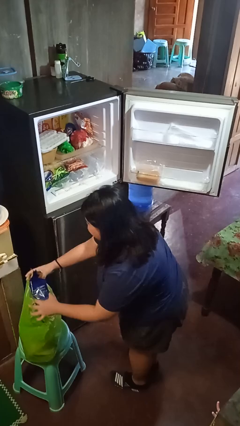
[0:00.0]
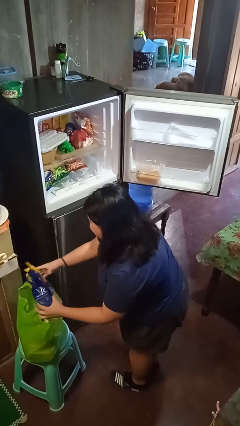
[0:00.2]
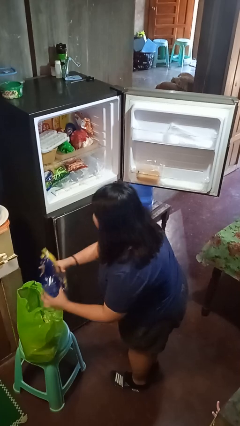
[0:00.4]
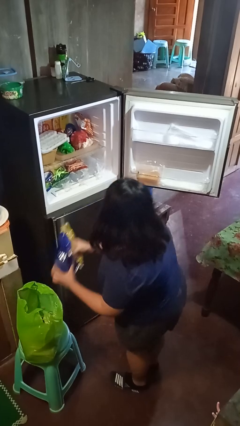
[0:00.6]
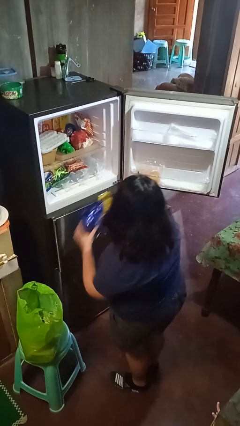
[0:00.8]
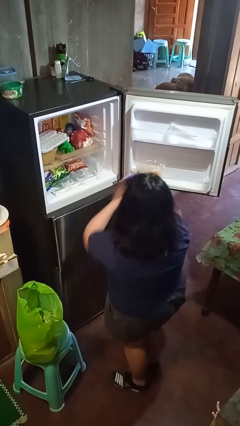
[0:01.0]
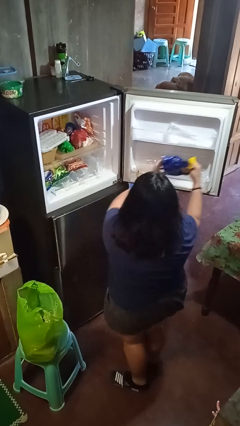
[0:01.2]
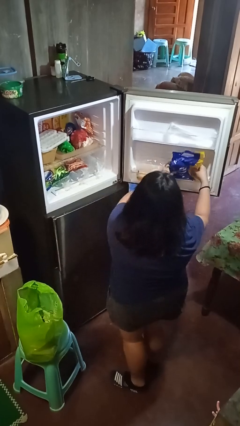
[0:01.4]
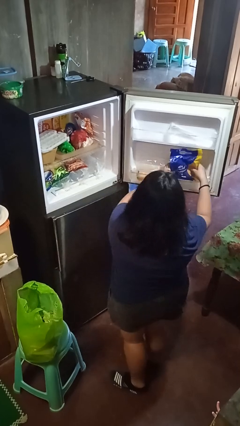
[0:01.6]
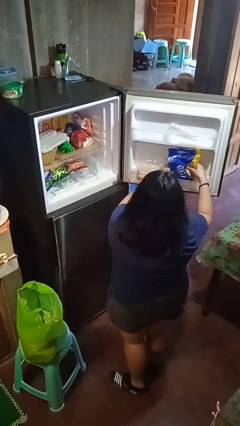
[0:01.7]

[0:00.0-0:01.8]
person loads groceries into refrigerator

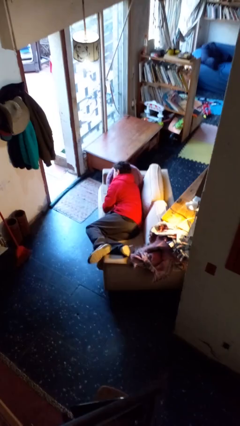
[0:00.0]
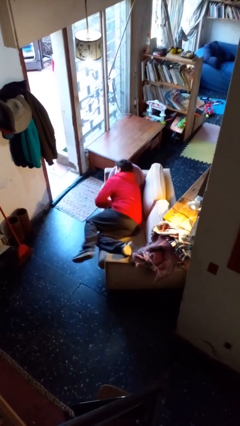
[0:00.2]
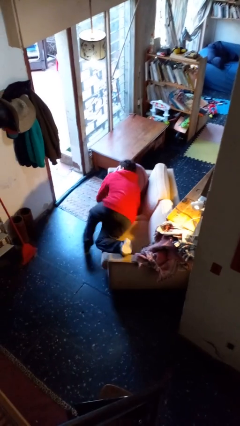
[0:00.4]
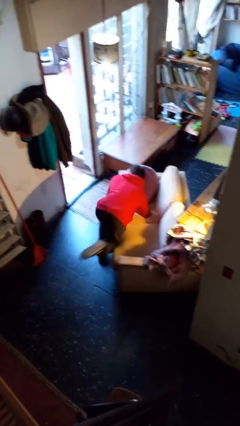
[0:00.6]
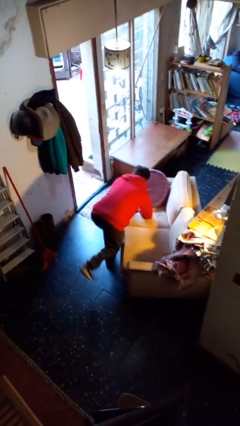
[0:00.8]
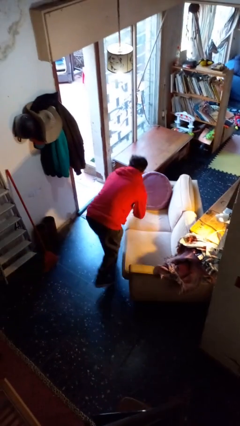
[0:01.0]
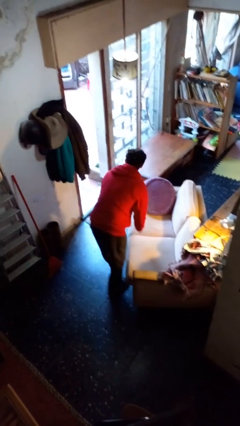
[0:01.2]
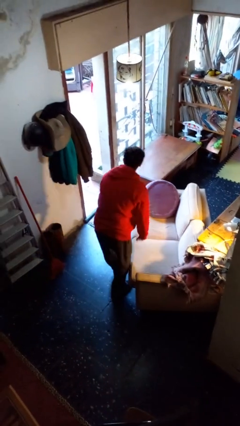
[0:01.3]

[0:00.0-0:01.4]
person stands up

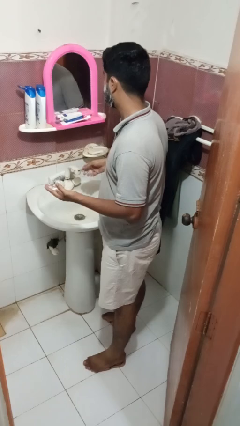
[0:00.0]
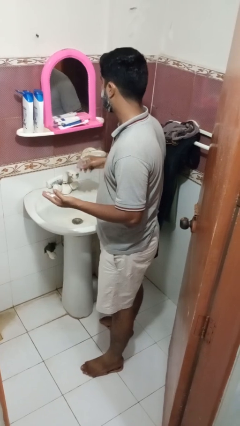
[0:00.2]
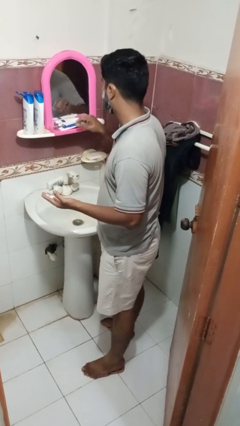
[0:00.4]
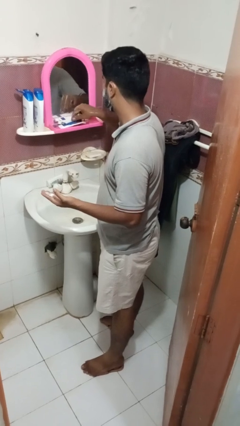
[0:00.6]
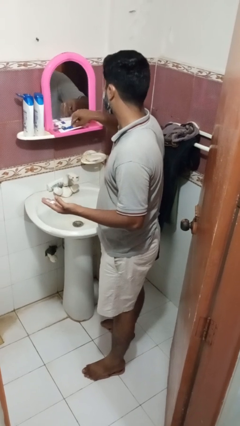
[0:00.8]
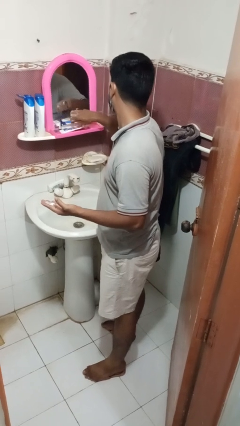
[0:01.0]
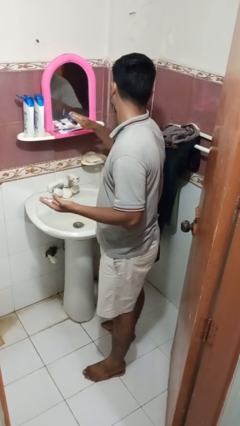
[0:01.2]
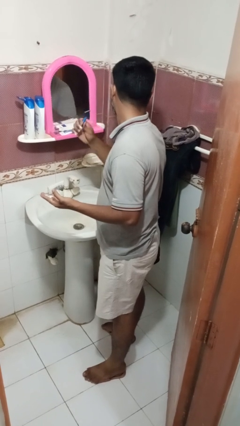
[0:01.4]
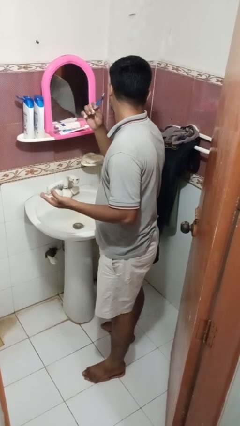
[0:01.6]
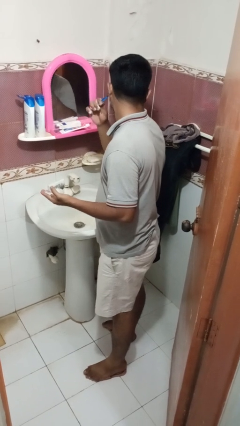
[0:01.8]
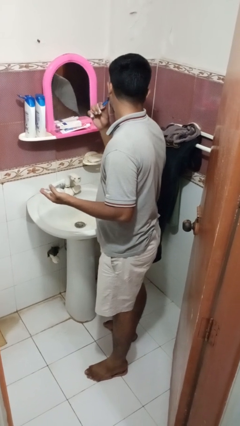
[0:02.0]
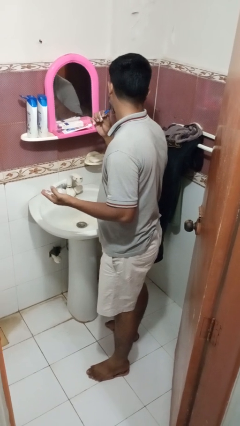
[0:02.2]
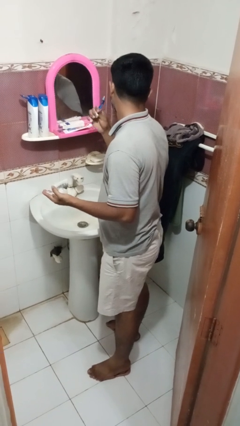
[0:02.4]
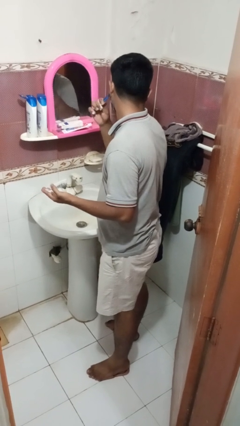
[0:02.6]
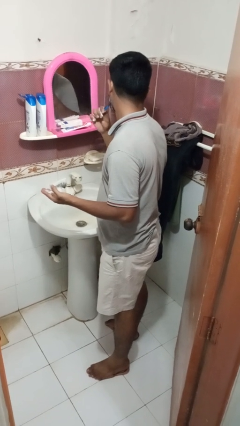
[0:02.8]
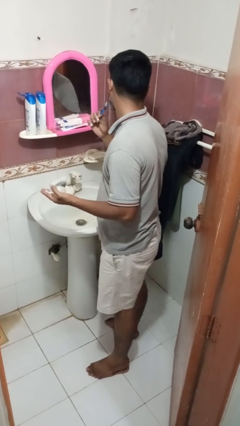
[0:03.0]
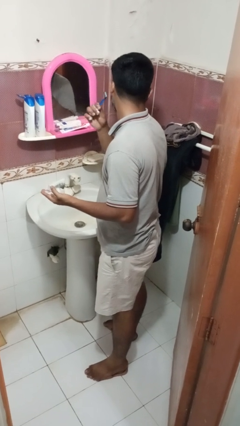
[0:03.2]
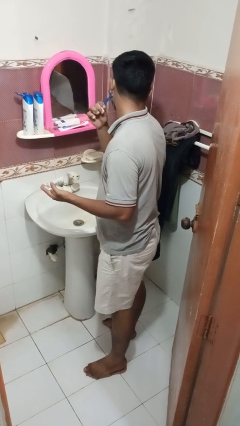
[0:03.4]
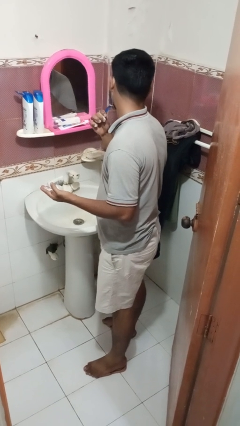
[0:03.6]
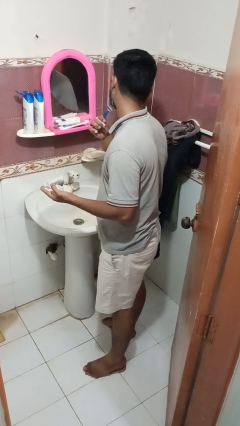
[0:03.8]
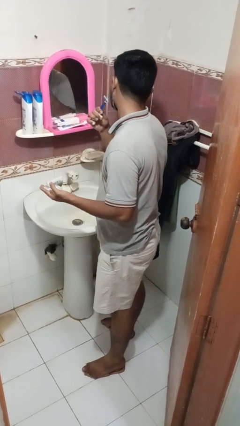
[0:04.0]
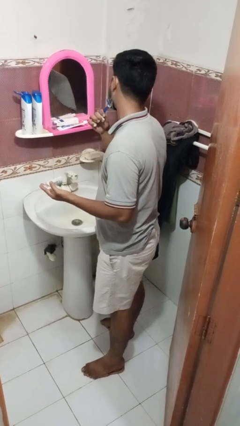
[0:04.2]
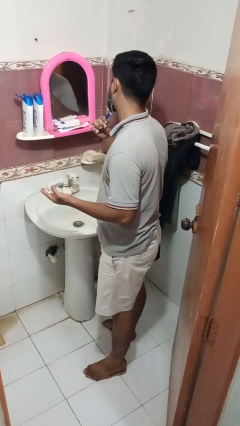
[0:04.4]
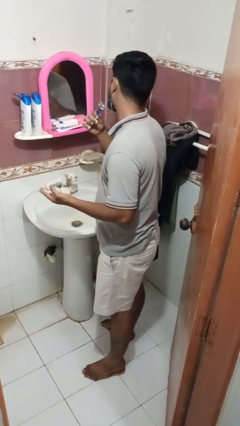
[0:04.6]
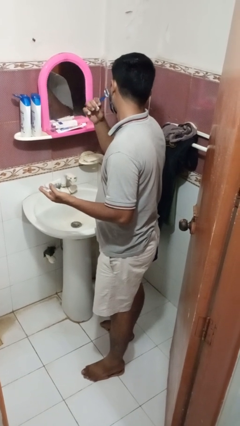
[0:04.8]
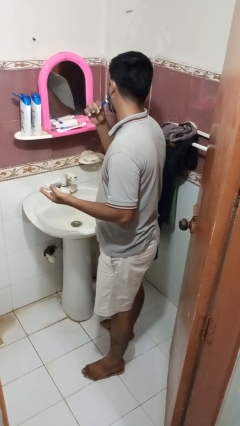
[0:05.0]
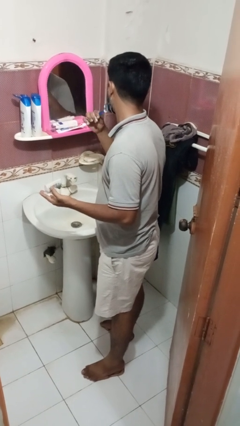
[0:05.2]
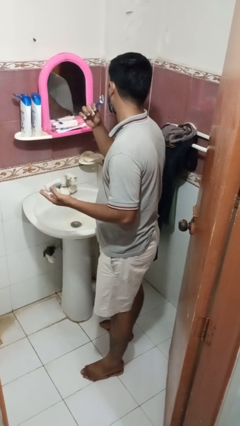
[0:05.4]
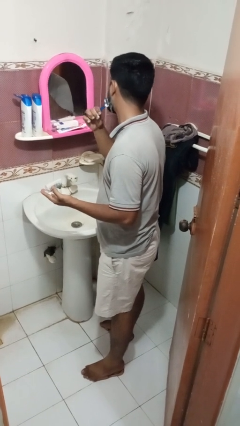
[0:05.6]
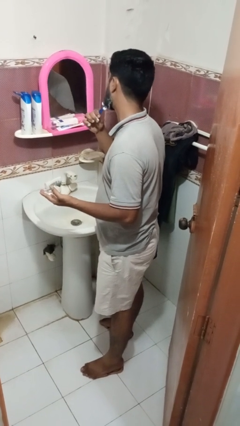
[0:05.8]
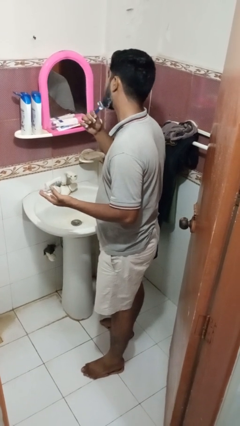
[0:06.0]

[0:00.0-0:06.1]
person shaves face

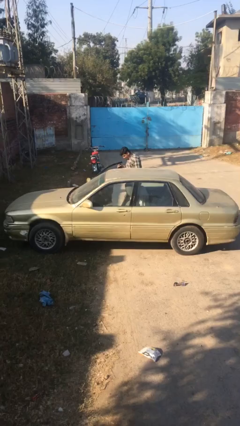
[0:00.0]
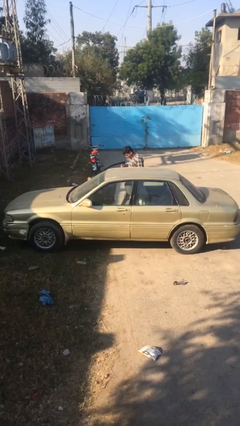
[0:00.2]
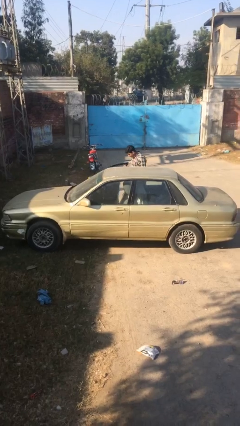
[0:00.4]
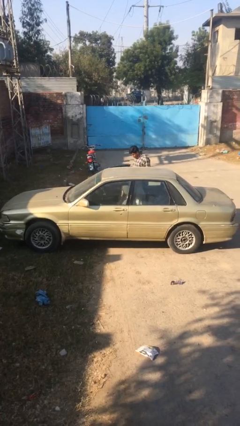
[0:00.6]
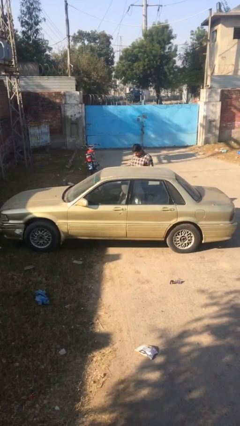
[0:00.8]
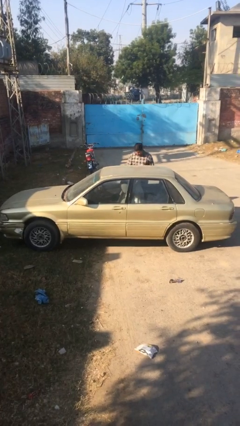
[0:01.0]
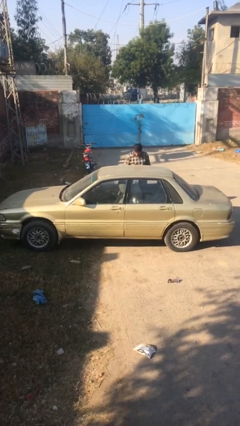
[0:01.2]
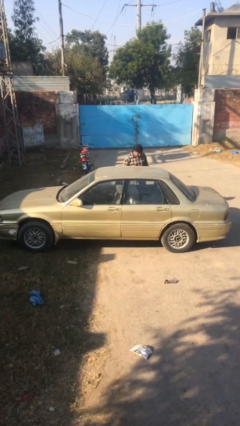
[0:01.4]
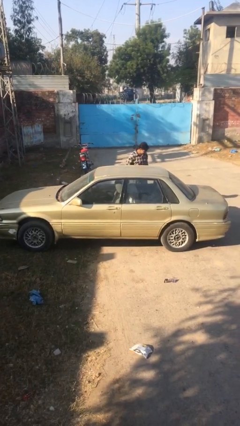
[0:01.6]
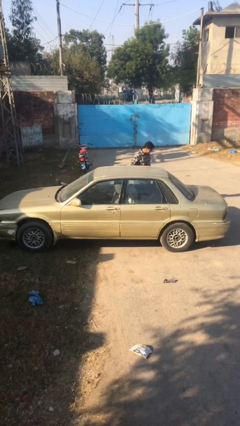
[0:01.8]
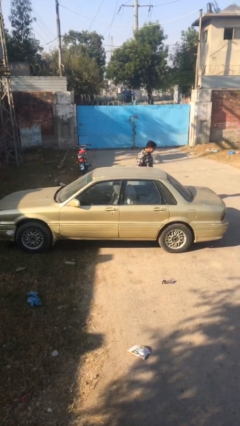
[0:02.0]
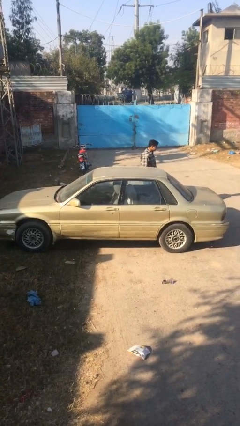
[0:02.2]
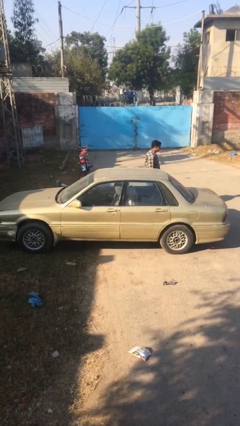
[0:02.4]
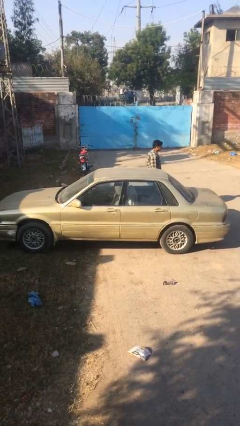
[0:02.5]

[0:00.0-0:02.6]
person closes car door

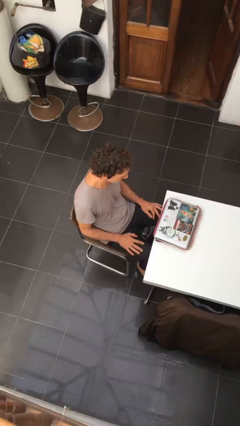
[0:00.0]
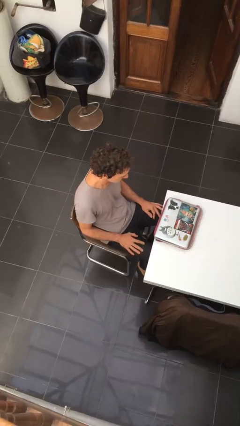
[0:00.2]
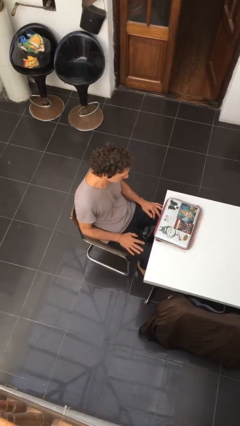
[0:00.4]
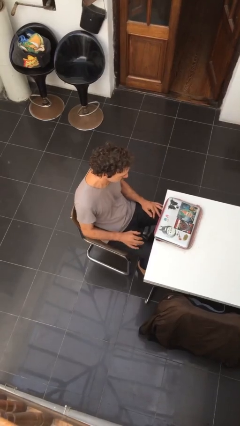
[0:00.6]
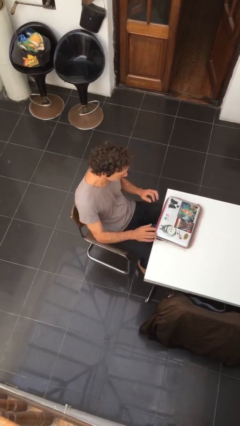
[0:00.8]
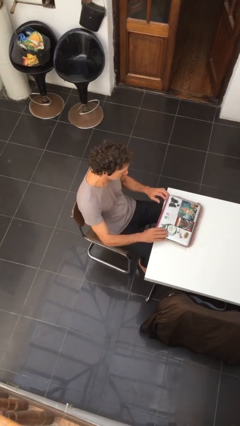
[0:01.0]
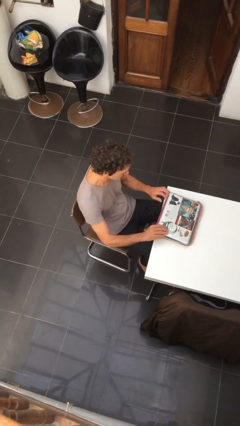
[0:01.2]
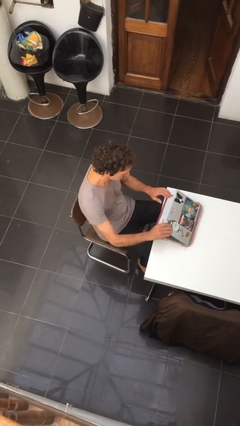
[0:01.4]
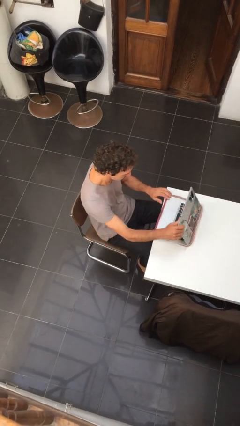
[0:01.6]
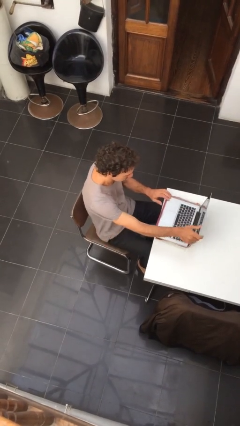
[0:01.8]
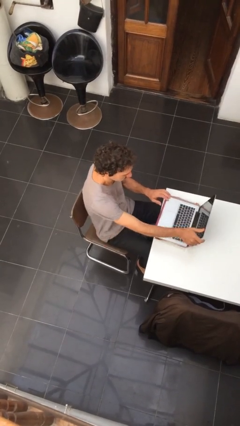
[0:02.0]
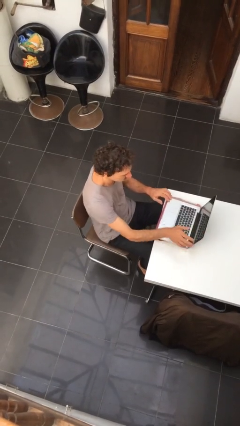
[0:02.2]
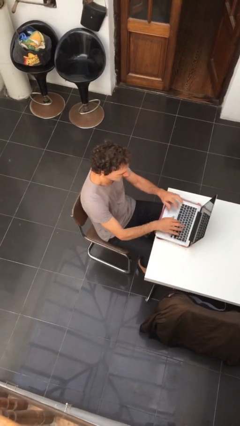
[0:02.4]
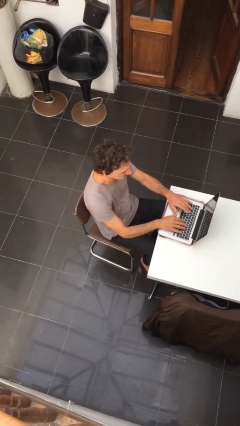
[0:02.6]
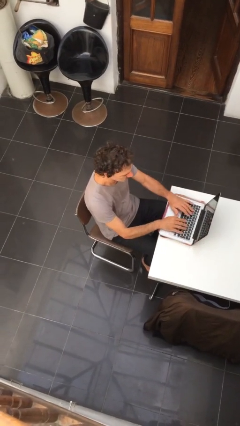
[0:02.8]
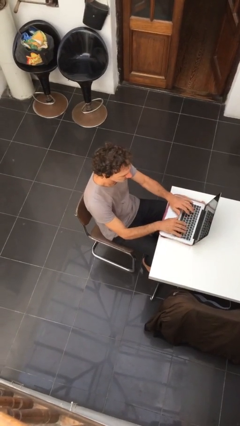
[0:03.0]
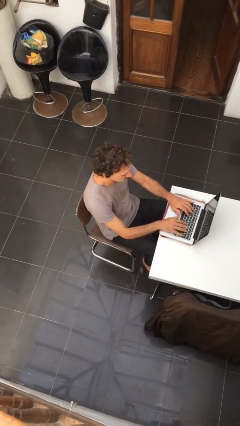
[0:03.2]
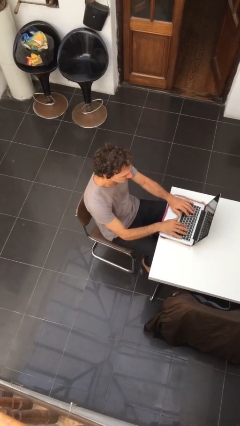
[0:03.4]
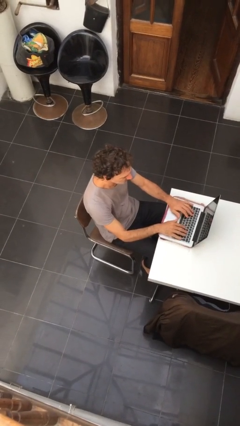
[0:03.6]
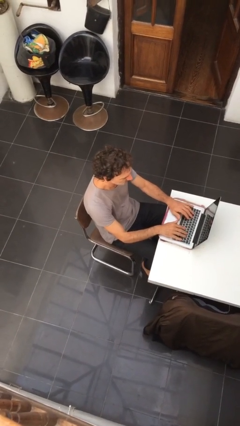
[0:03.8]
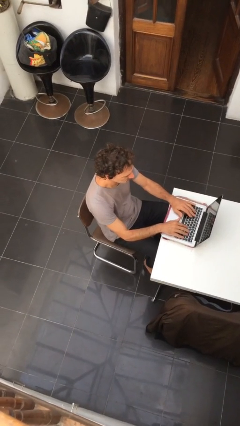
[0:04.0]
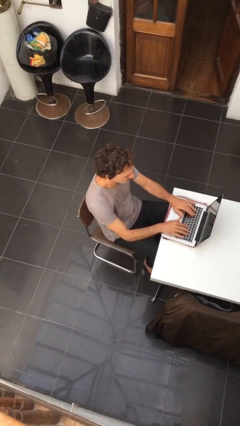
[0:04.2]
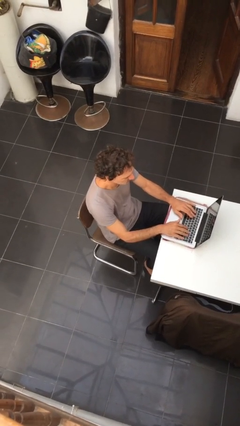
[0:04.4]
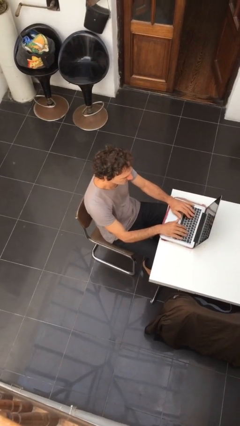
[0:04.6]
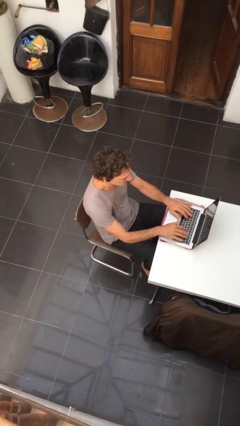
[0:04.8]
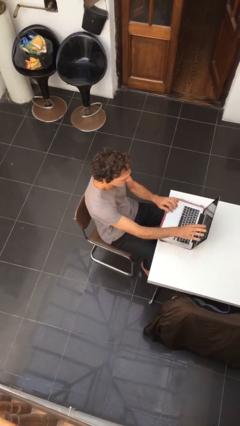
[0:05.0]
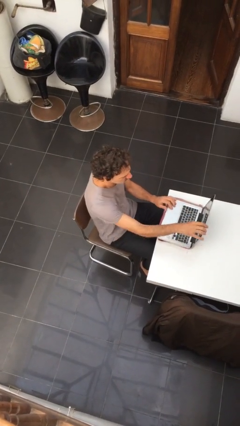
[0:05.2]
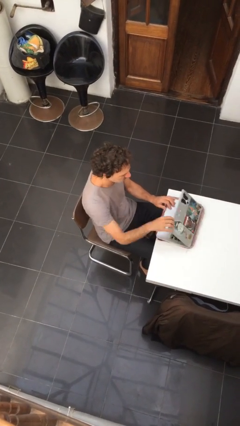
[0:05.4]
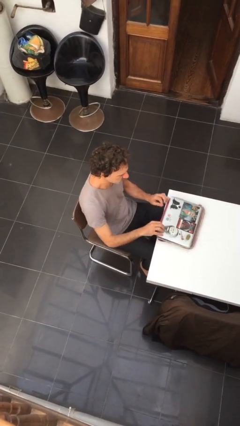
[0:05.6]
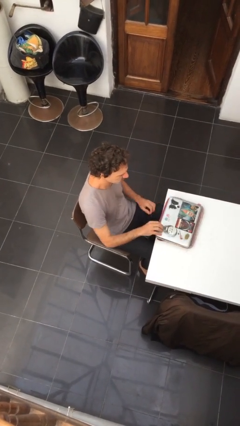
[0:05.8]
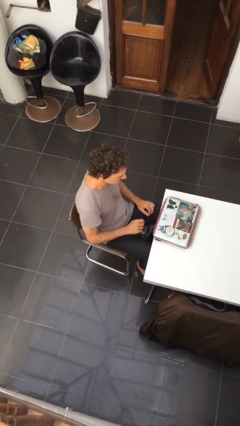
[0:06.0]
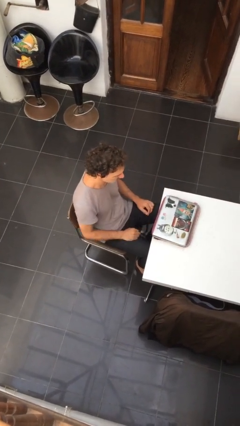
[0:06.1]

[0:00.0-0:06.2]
person interacts with laptop
